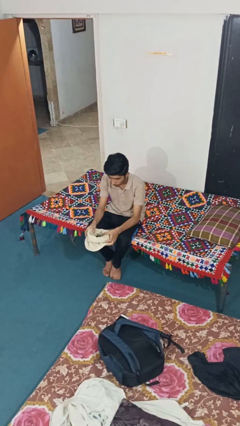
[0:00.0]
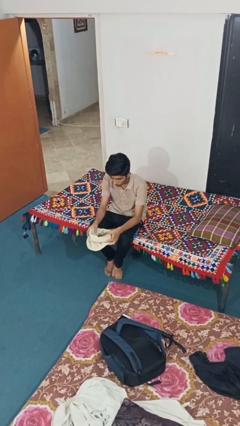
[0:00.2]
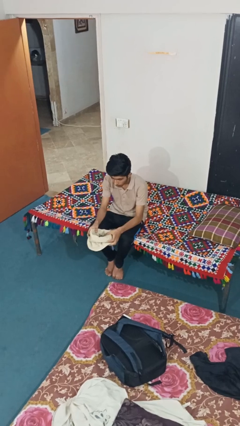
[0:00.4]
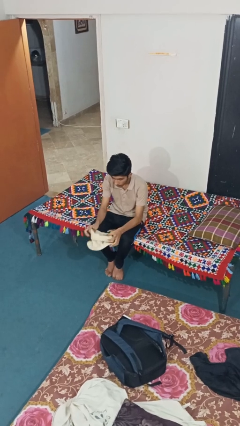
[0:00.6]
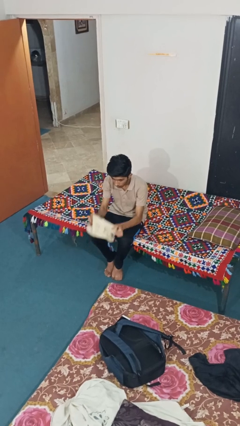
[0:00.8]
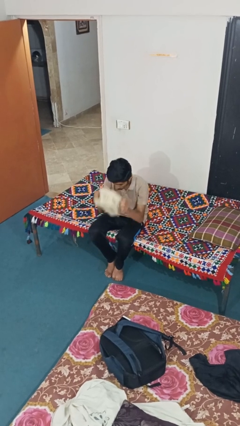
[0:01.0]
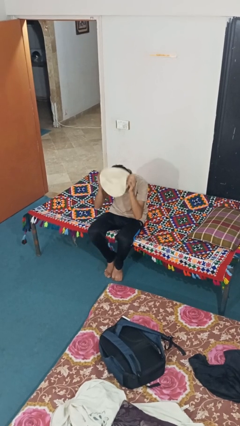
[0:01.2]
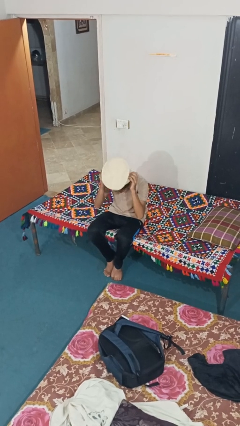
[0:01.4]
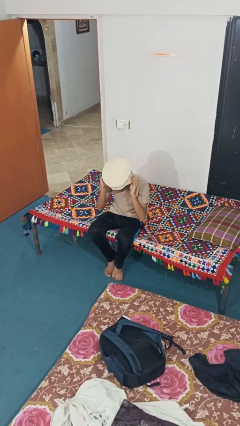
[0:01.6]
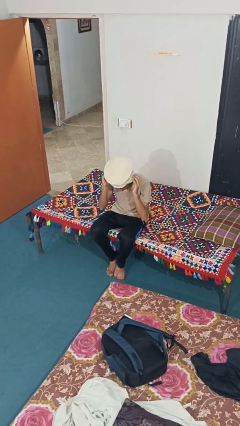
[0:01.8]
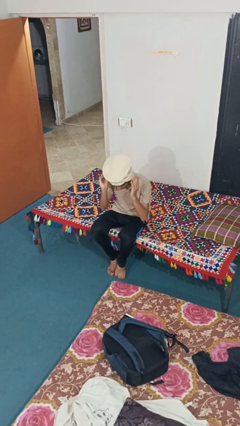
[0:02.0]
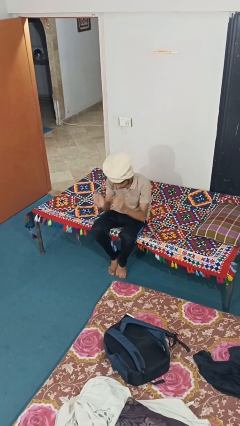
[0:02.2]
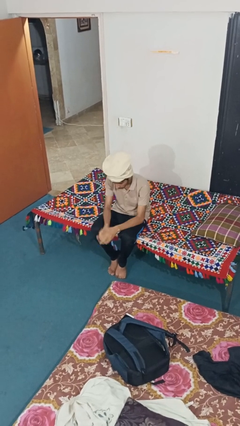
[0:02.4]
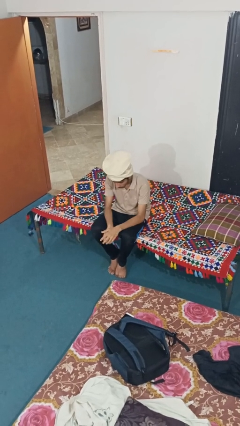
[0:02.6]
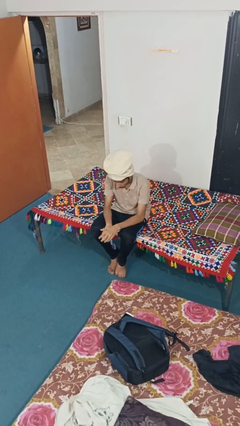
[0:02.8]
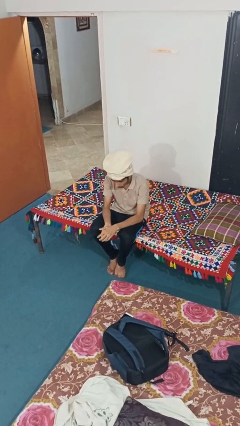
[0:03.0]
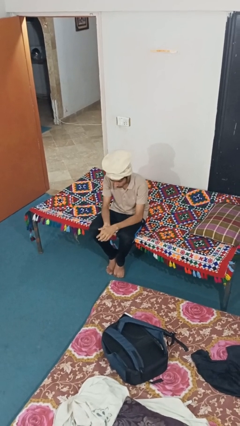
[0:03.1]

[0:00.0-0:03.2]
person puts on hat

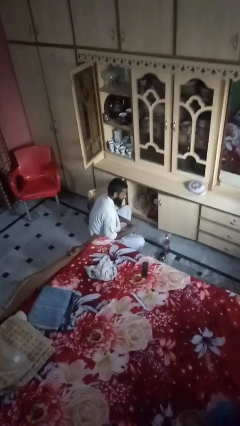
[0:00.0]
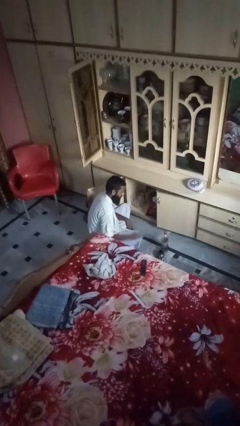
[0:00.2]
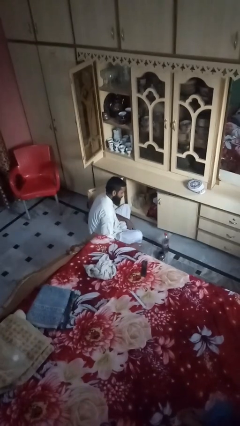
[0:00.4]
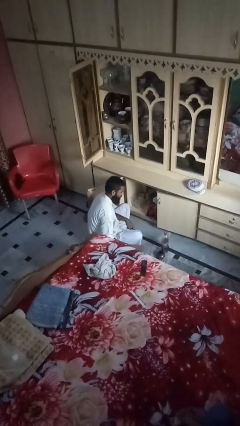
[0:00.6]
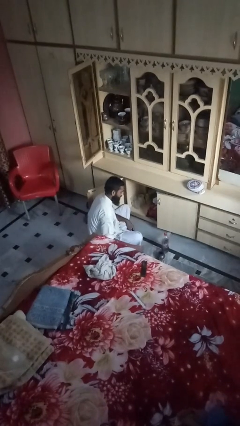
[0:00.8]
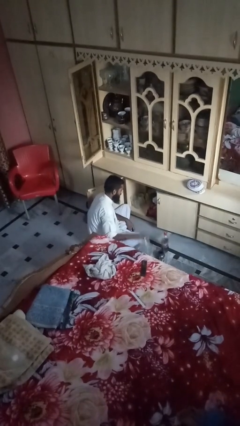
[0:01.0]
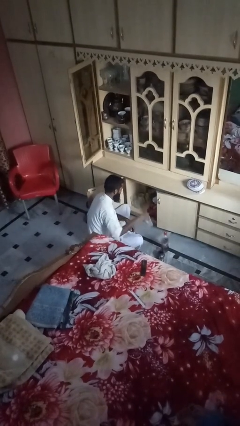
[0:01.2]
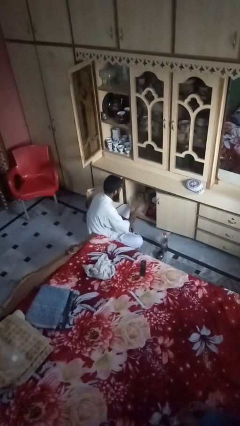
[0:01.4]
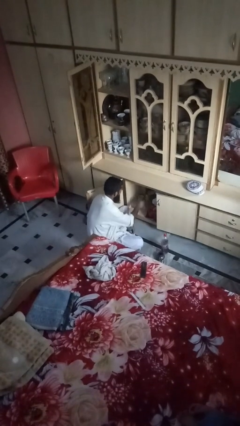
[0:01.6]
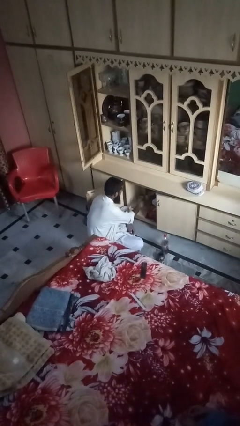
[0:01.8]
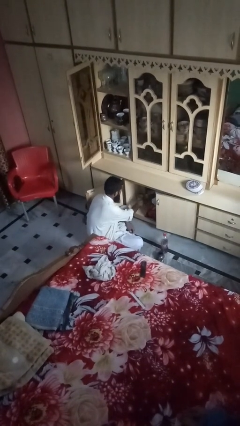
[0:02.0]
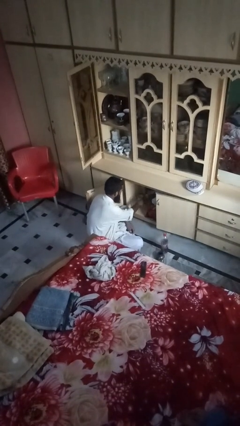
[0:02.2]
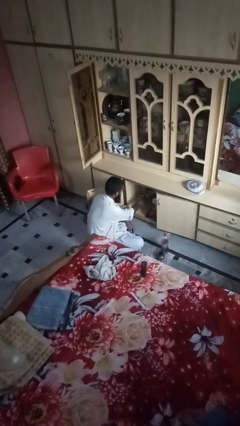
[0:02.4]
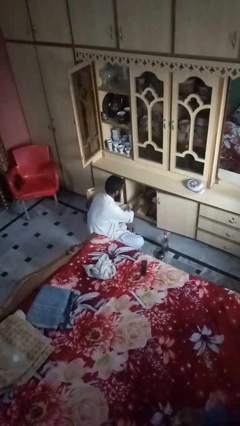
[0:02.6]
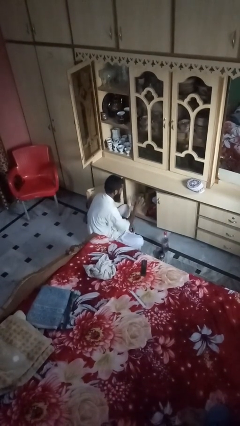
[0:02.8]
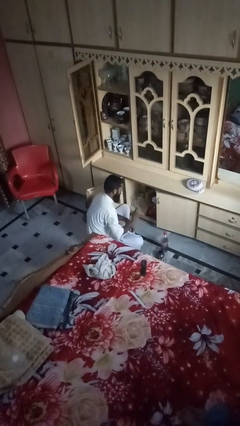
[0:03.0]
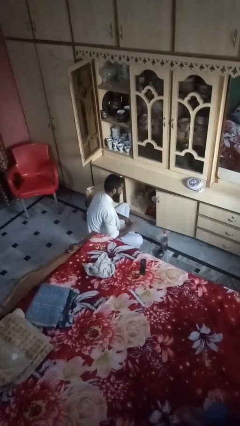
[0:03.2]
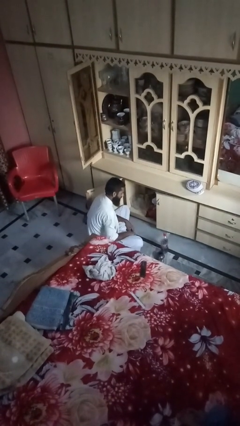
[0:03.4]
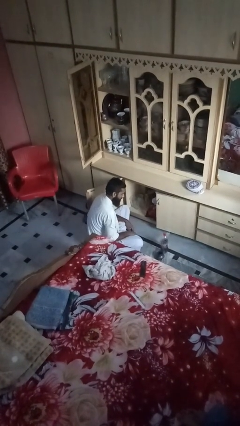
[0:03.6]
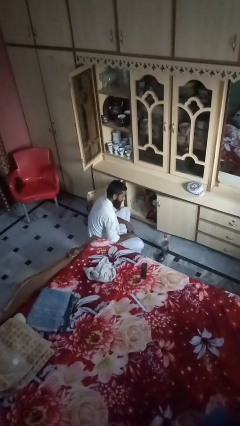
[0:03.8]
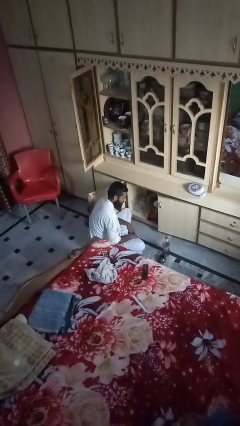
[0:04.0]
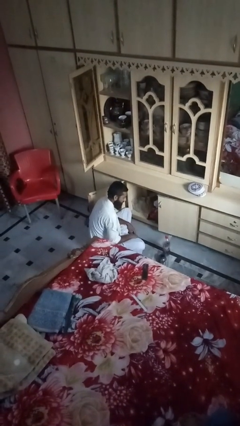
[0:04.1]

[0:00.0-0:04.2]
person loads groceries into cabinet

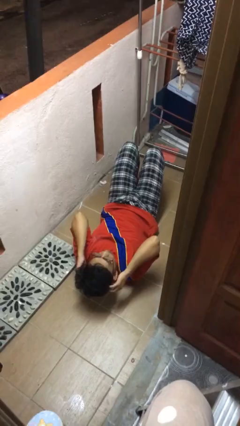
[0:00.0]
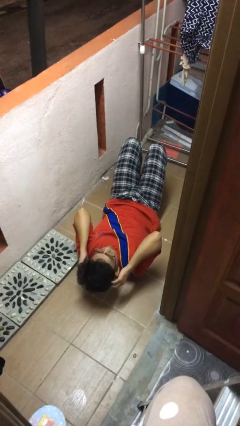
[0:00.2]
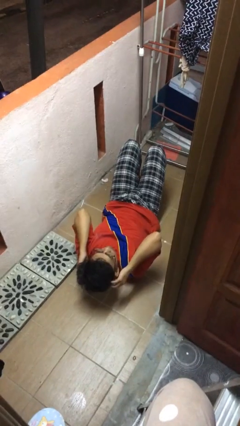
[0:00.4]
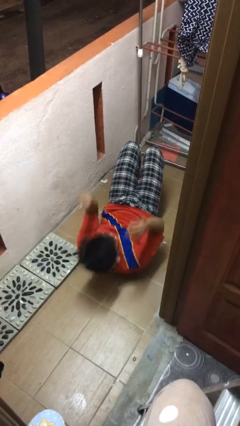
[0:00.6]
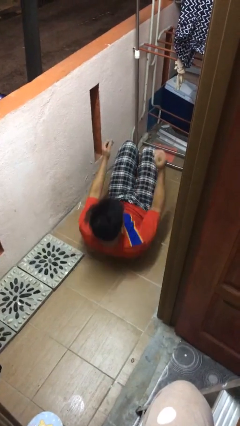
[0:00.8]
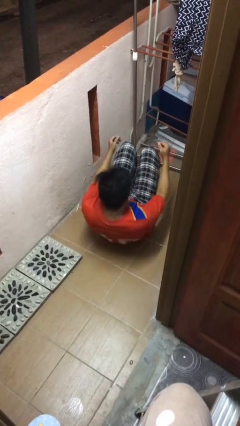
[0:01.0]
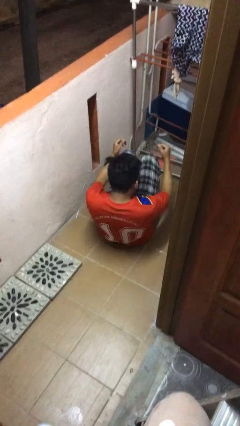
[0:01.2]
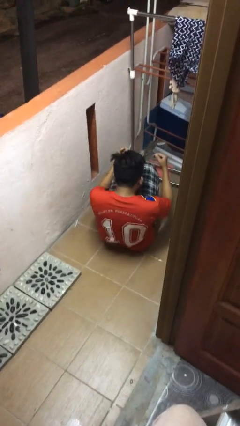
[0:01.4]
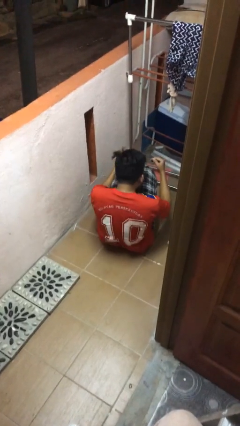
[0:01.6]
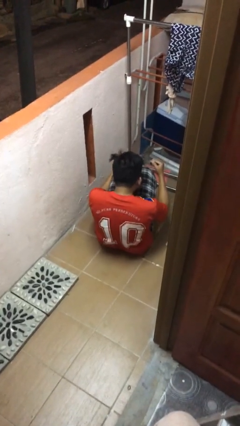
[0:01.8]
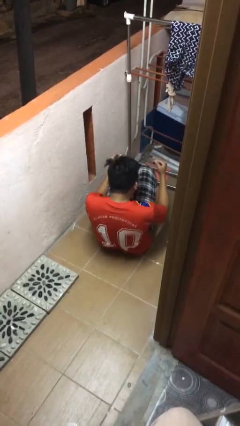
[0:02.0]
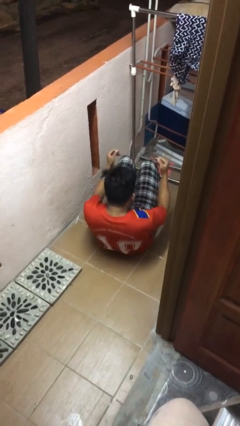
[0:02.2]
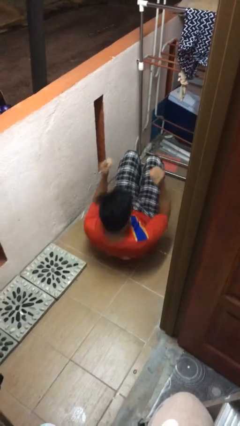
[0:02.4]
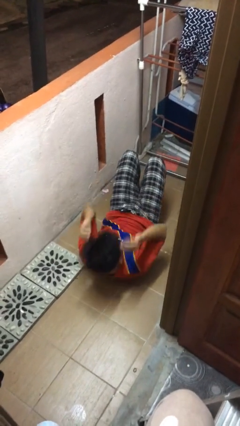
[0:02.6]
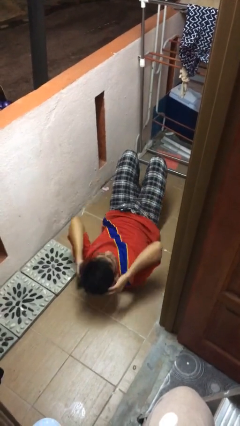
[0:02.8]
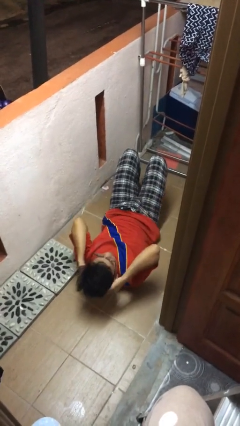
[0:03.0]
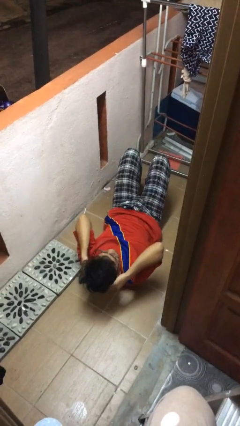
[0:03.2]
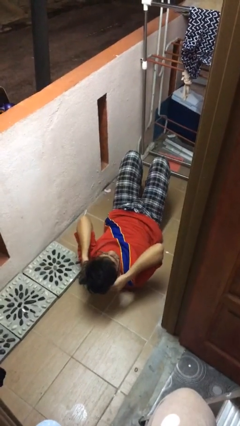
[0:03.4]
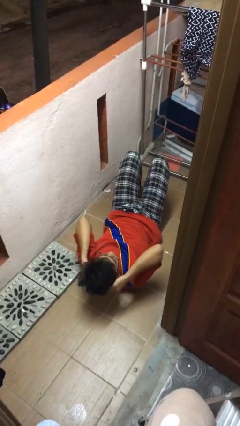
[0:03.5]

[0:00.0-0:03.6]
person exercises with situp

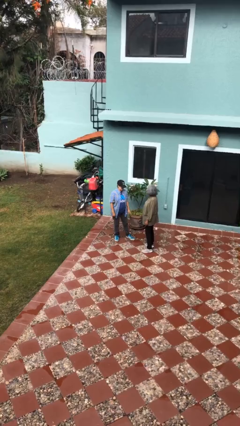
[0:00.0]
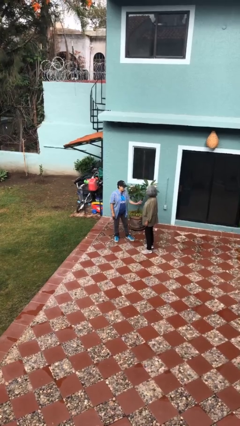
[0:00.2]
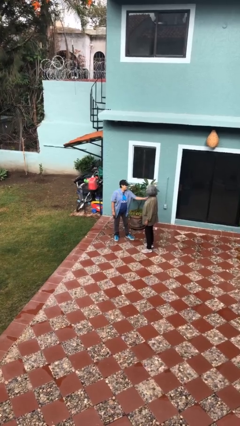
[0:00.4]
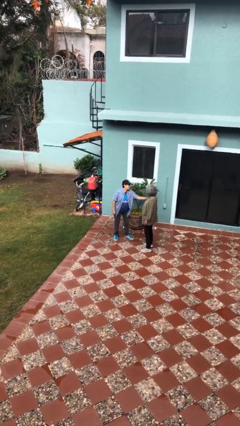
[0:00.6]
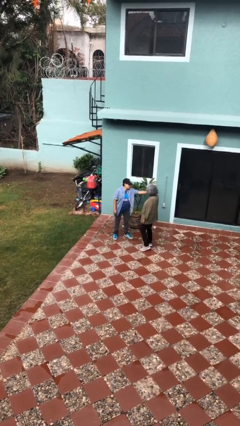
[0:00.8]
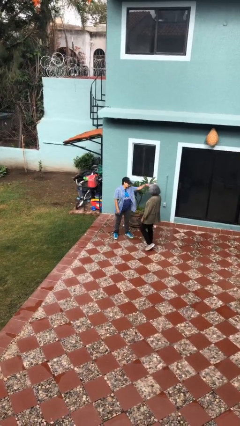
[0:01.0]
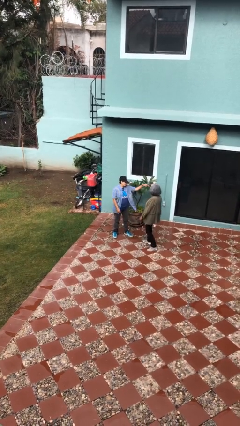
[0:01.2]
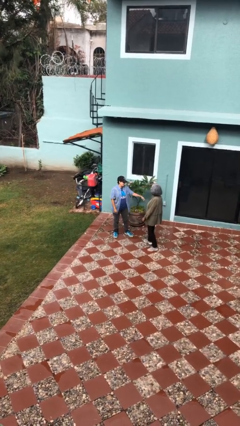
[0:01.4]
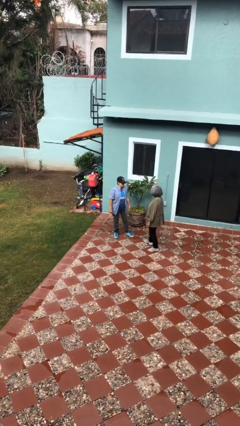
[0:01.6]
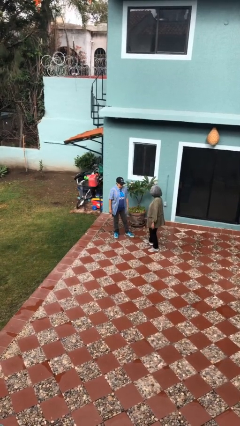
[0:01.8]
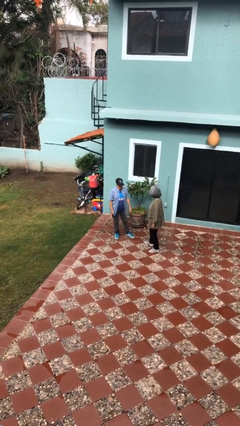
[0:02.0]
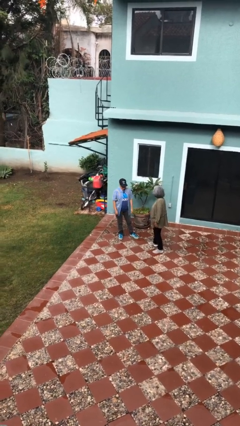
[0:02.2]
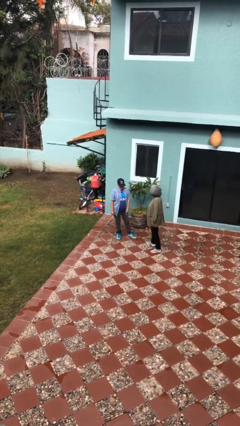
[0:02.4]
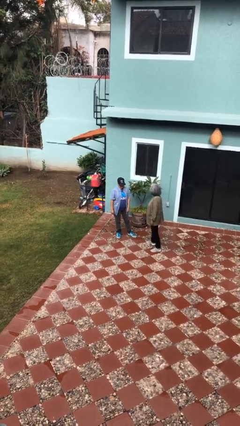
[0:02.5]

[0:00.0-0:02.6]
person shoves person

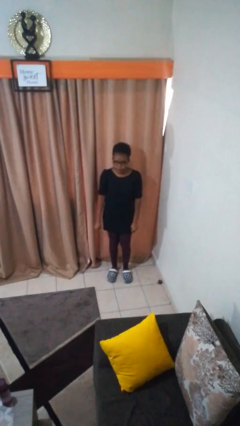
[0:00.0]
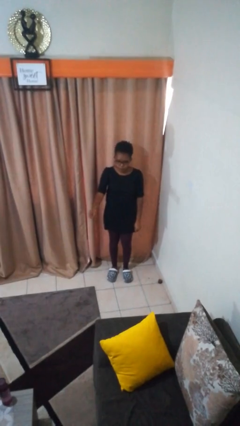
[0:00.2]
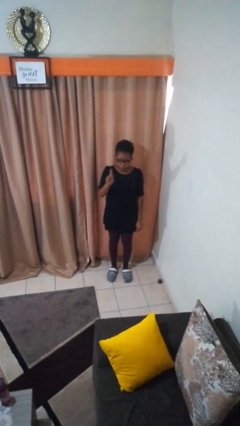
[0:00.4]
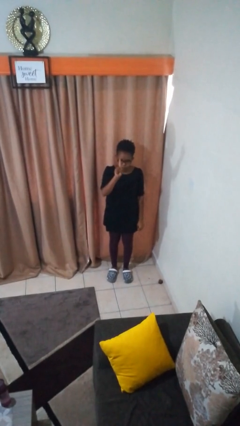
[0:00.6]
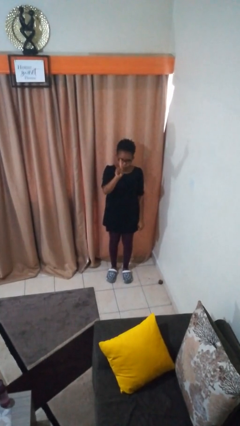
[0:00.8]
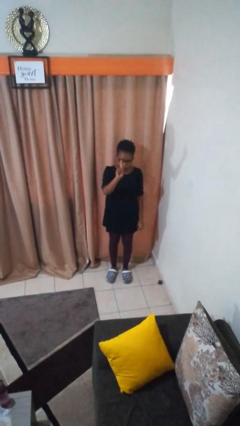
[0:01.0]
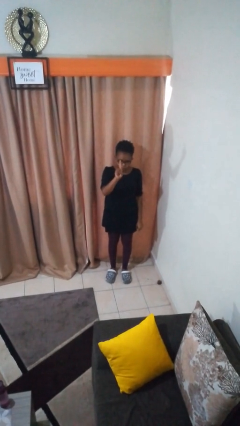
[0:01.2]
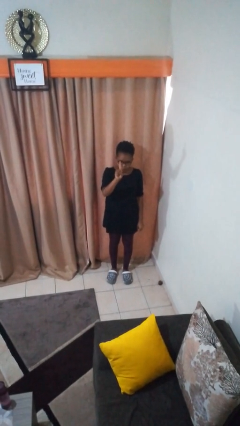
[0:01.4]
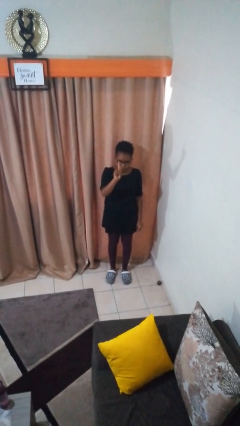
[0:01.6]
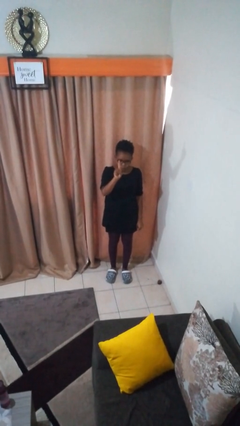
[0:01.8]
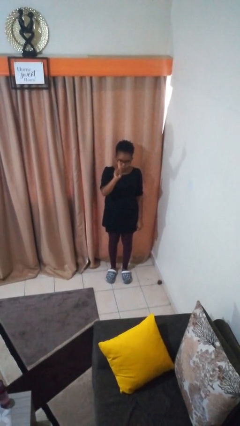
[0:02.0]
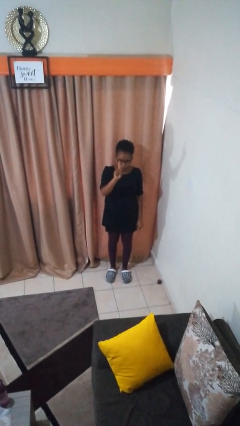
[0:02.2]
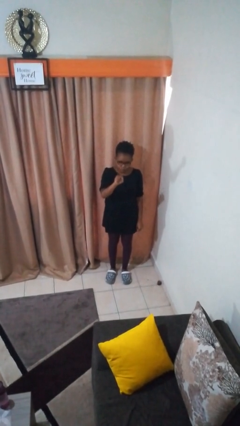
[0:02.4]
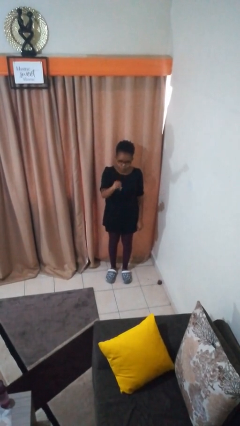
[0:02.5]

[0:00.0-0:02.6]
person gestures number one

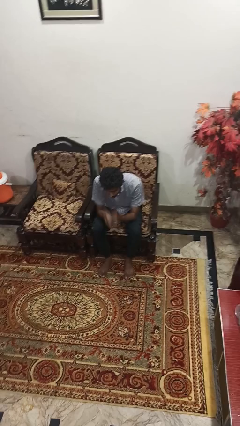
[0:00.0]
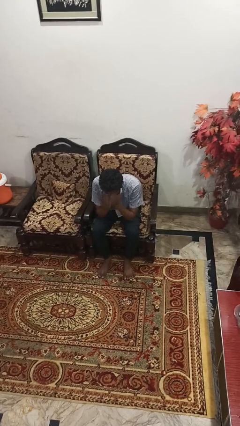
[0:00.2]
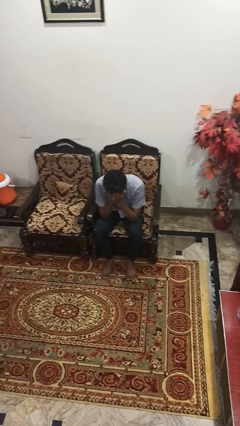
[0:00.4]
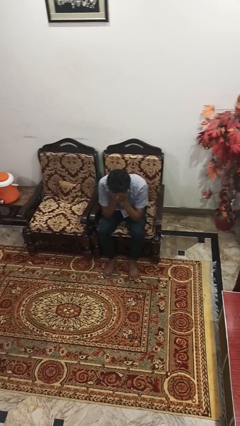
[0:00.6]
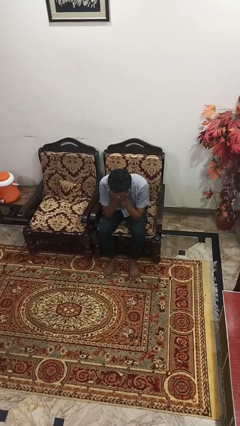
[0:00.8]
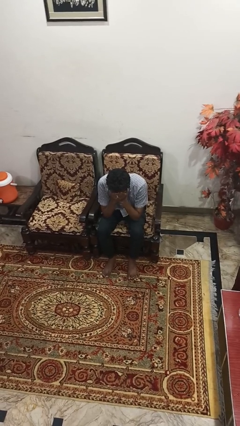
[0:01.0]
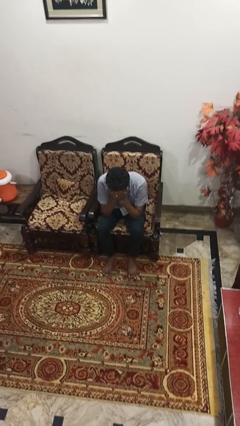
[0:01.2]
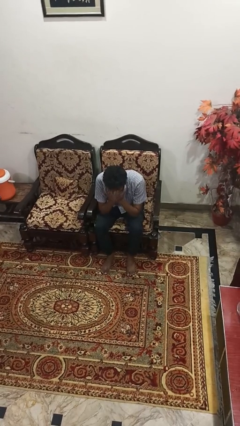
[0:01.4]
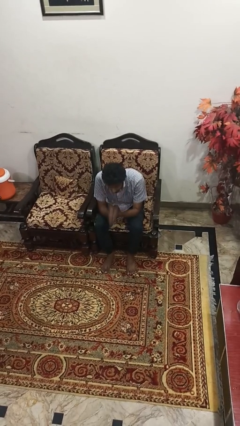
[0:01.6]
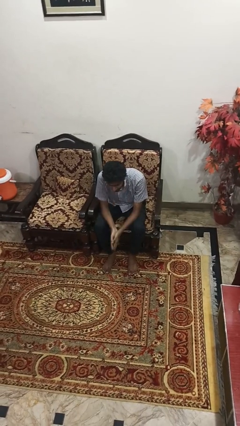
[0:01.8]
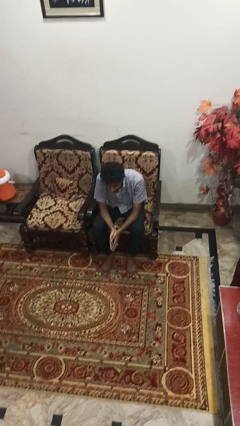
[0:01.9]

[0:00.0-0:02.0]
person covers face with hands
